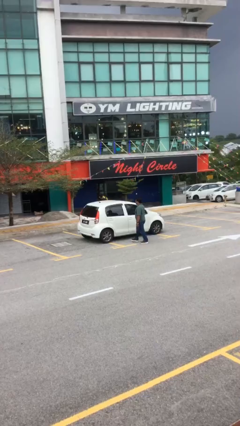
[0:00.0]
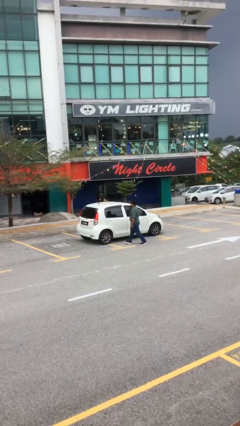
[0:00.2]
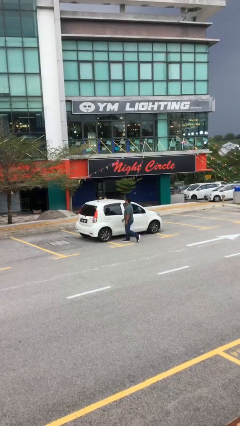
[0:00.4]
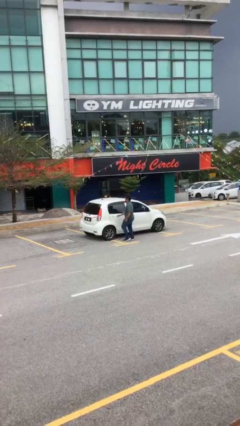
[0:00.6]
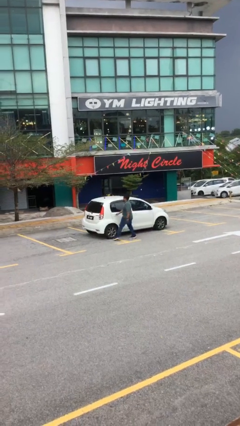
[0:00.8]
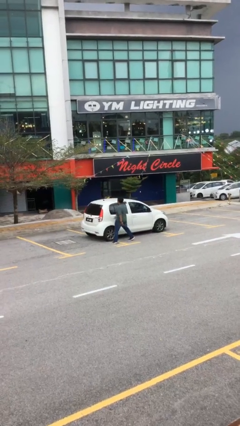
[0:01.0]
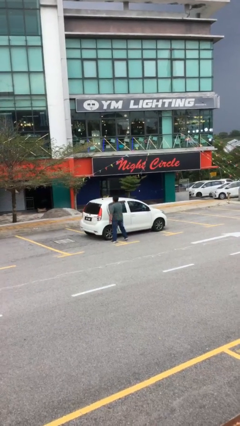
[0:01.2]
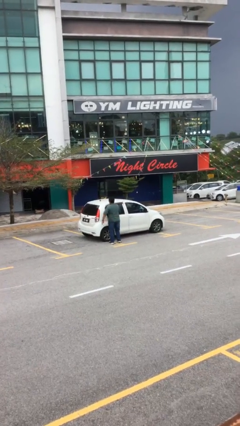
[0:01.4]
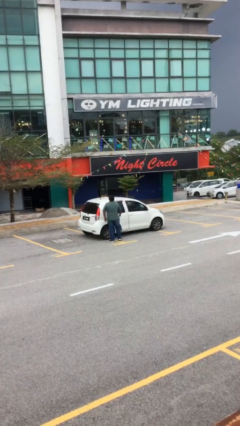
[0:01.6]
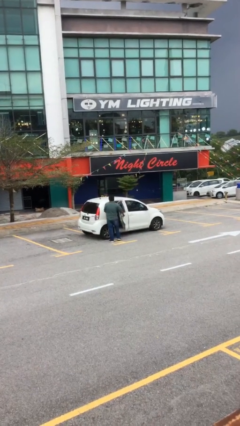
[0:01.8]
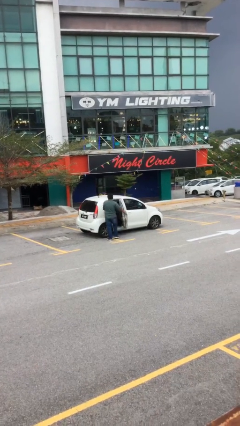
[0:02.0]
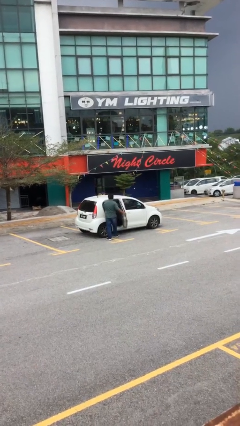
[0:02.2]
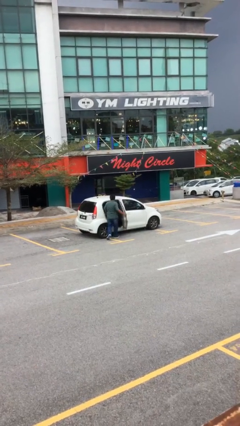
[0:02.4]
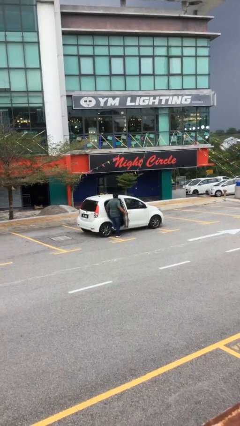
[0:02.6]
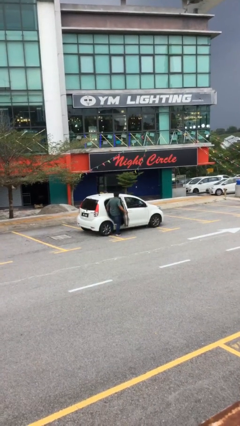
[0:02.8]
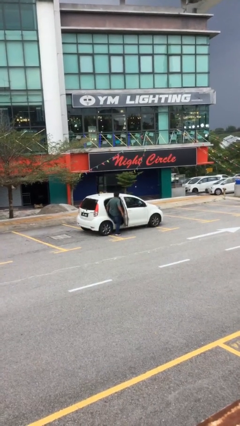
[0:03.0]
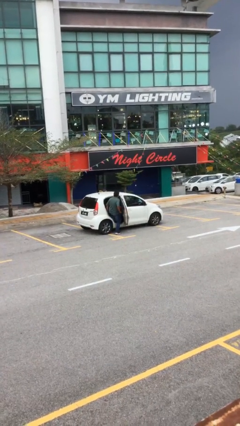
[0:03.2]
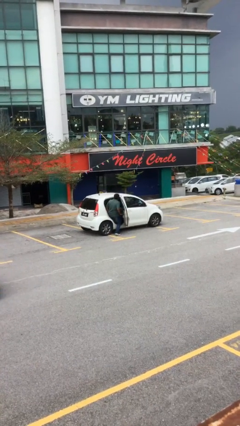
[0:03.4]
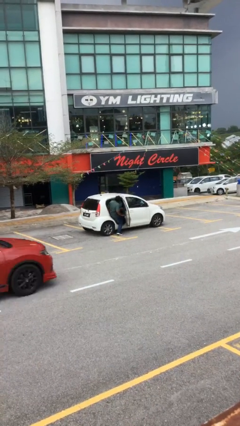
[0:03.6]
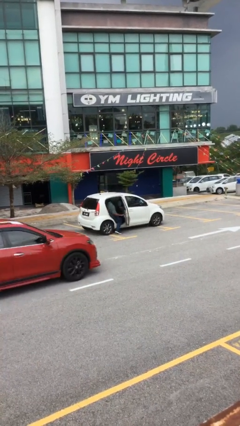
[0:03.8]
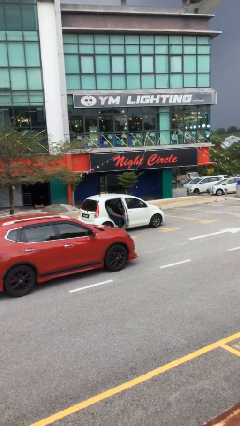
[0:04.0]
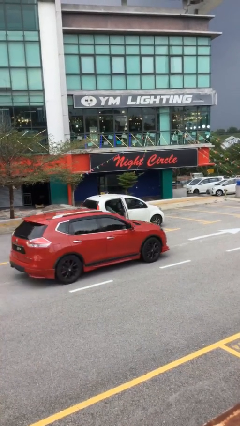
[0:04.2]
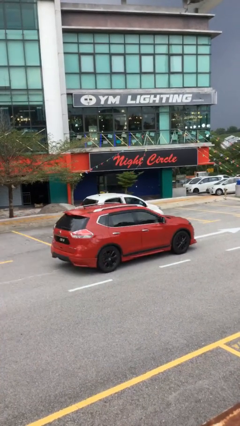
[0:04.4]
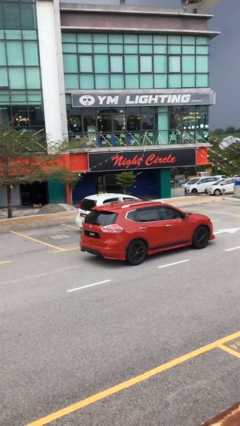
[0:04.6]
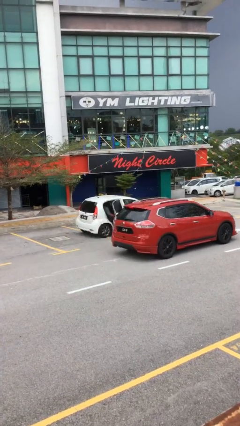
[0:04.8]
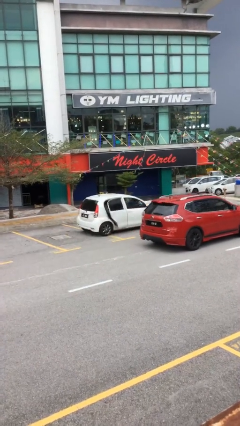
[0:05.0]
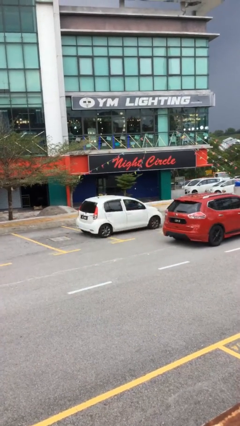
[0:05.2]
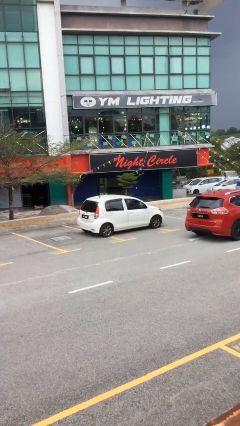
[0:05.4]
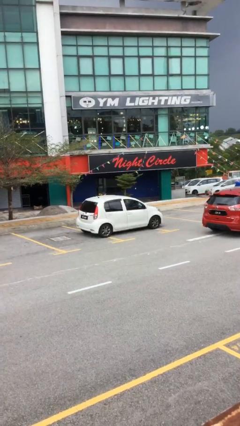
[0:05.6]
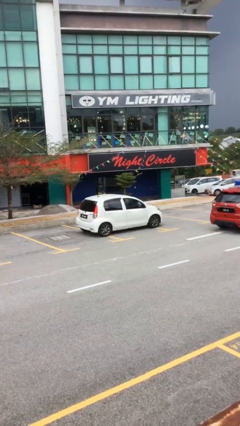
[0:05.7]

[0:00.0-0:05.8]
car picks up person

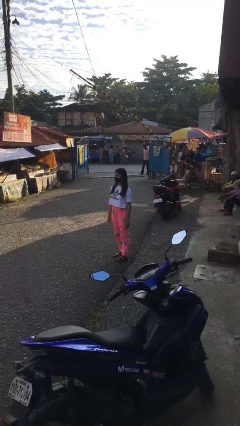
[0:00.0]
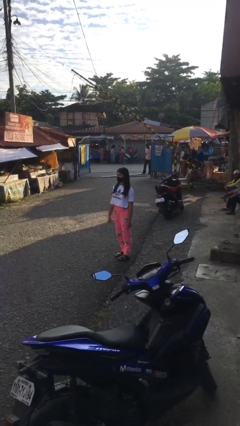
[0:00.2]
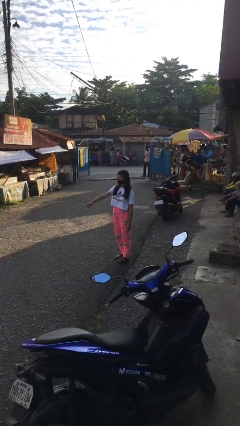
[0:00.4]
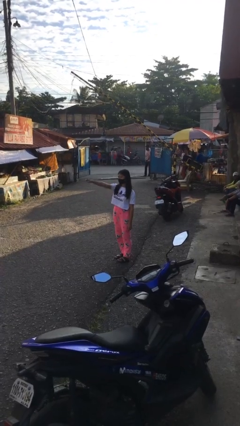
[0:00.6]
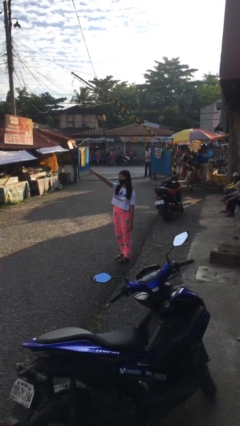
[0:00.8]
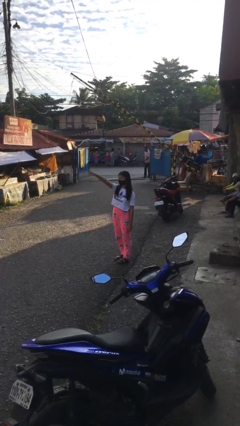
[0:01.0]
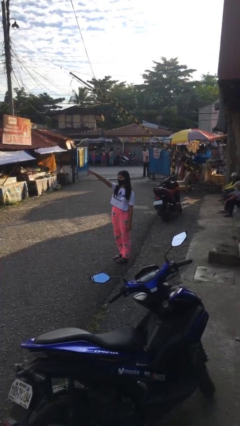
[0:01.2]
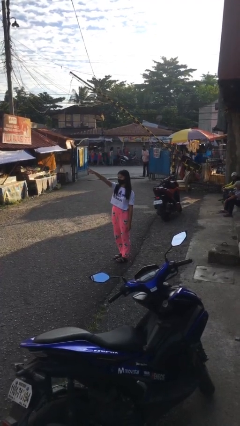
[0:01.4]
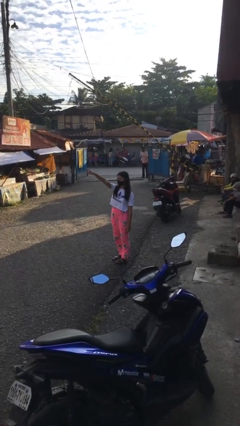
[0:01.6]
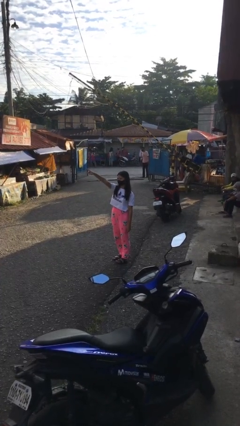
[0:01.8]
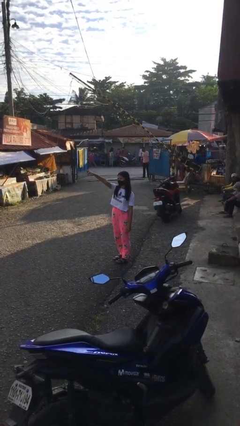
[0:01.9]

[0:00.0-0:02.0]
person points at person

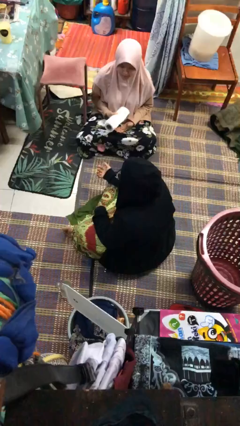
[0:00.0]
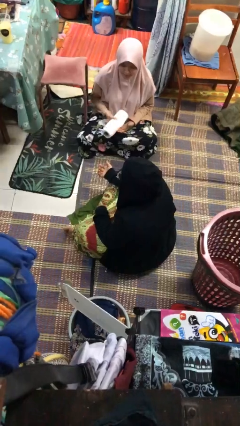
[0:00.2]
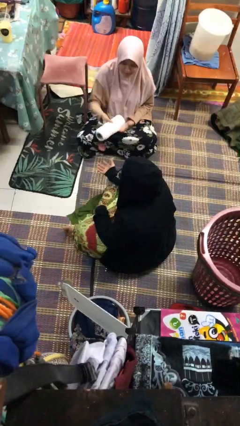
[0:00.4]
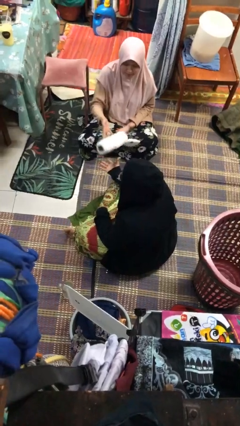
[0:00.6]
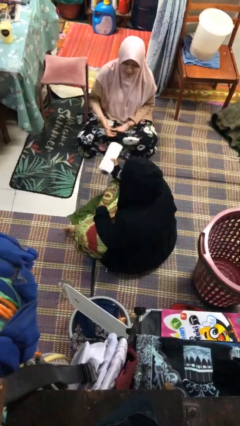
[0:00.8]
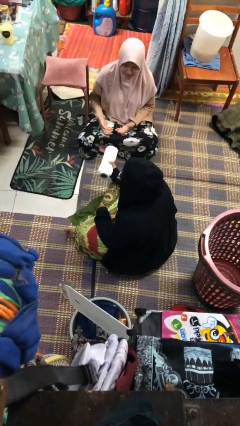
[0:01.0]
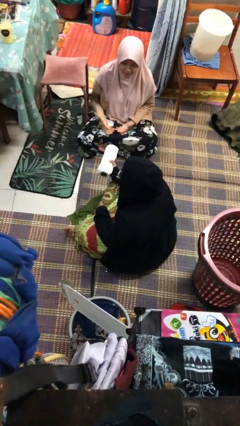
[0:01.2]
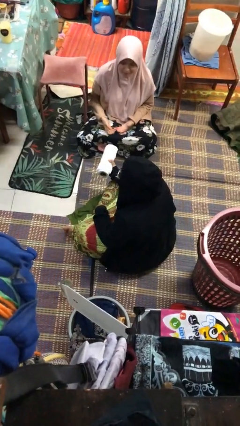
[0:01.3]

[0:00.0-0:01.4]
person catches object from person

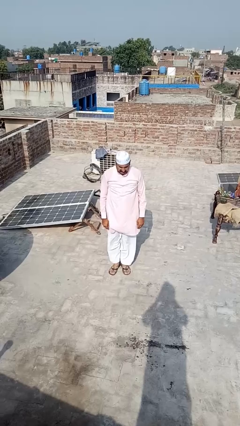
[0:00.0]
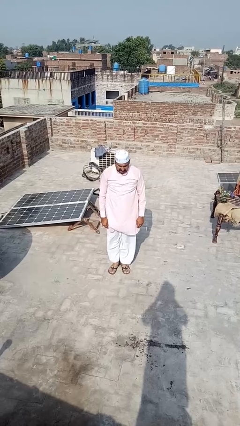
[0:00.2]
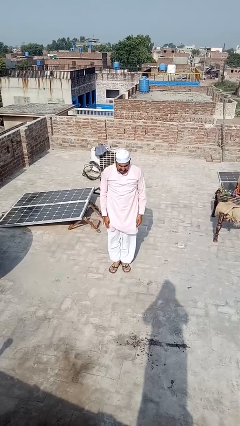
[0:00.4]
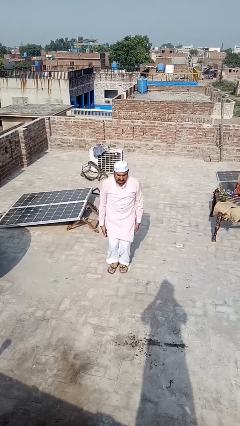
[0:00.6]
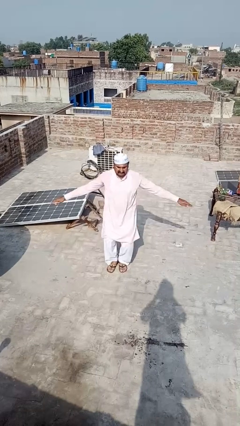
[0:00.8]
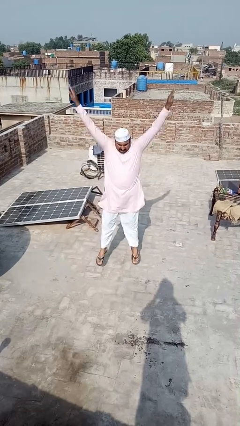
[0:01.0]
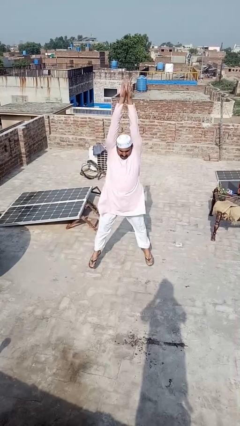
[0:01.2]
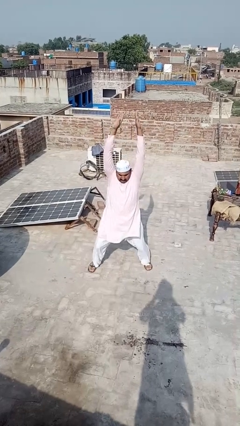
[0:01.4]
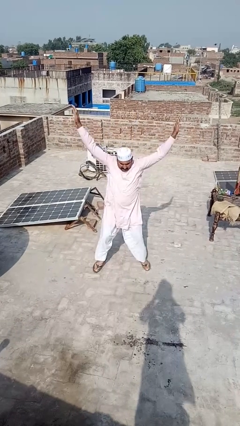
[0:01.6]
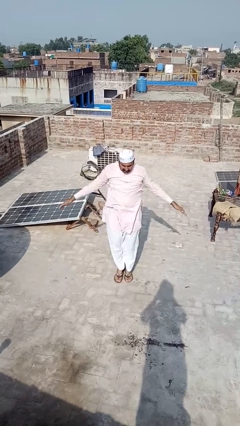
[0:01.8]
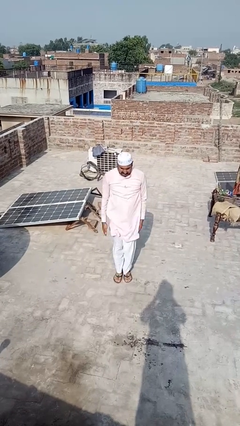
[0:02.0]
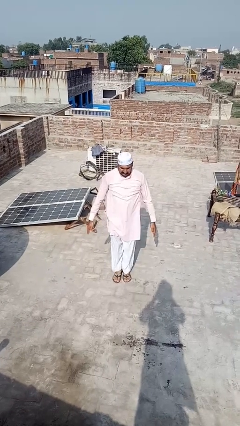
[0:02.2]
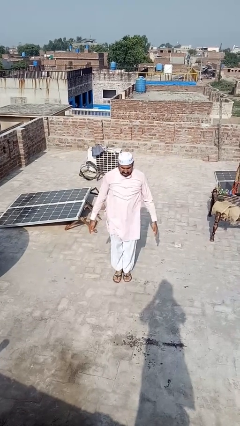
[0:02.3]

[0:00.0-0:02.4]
person exercises with jumping jacks

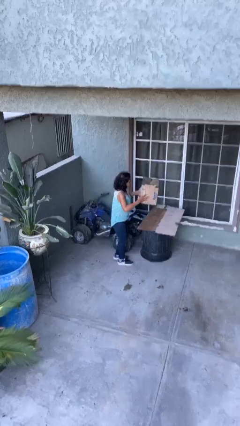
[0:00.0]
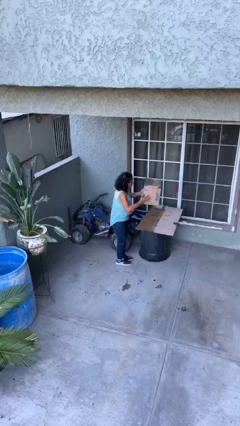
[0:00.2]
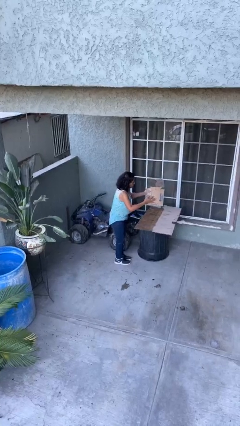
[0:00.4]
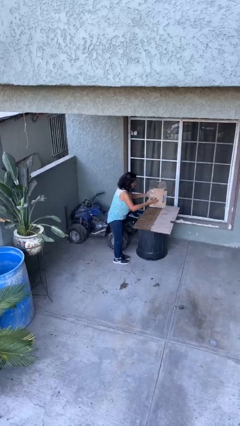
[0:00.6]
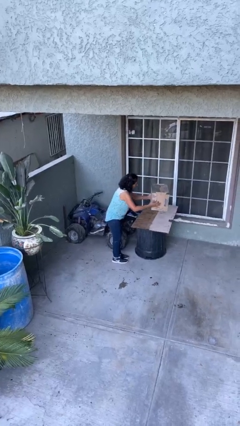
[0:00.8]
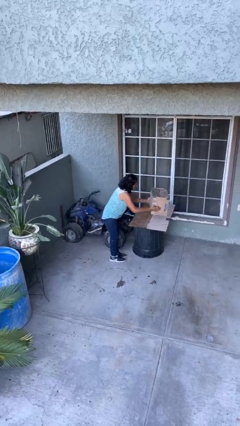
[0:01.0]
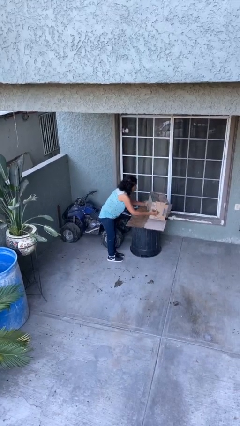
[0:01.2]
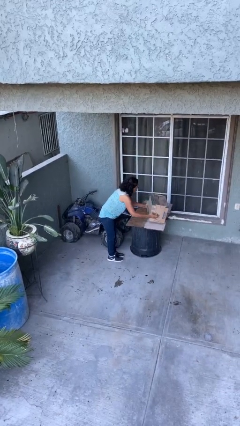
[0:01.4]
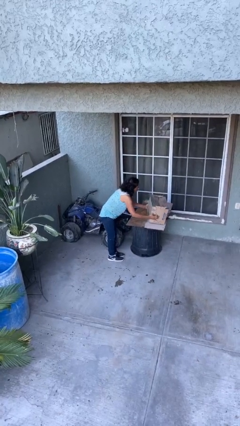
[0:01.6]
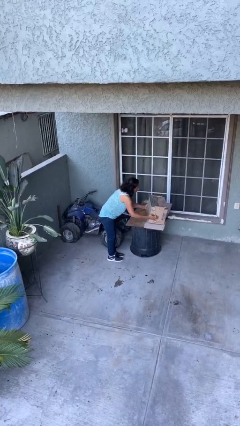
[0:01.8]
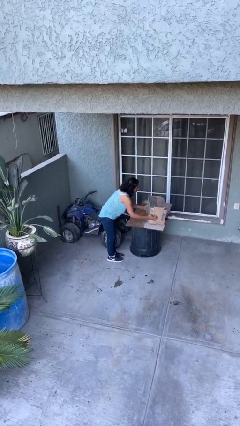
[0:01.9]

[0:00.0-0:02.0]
person puts down object on table

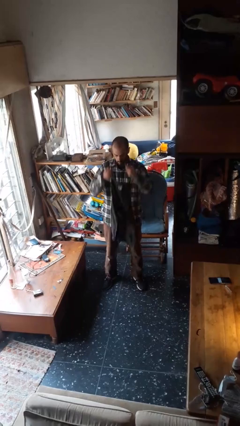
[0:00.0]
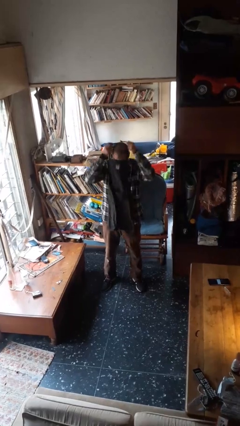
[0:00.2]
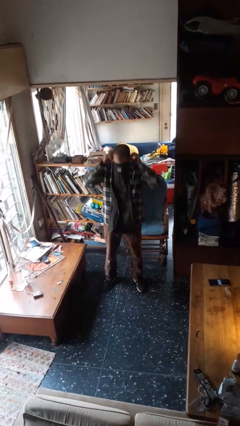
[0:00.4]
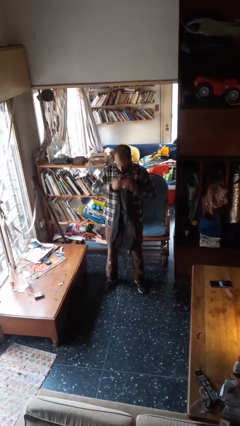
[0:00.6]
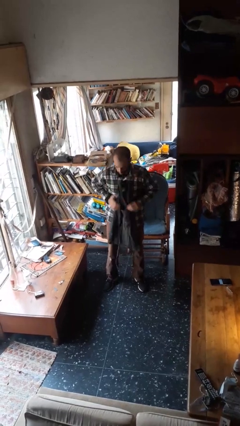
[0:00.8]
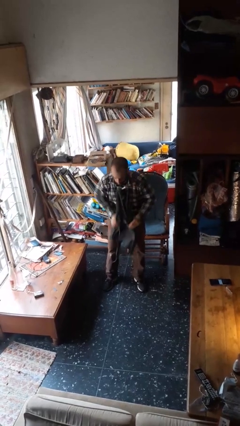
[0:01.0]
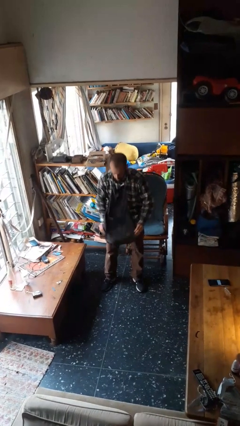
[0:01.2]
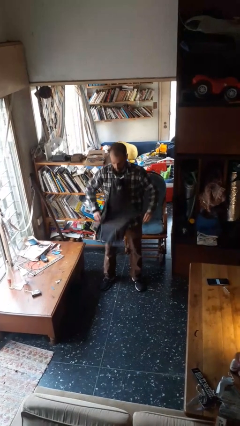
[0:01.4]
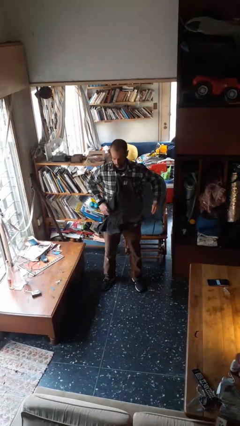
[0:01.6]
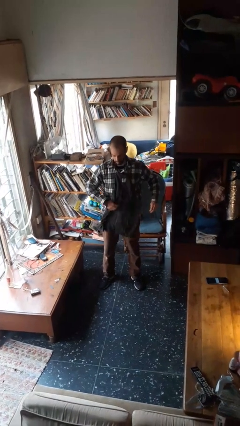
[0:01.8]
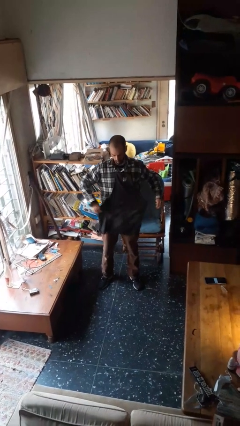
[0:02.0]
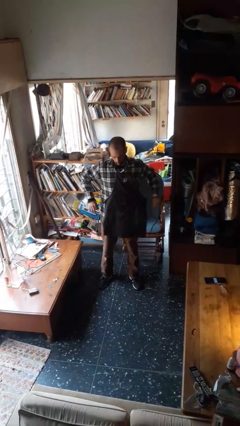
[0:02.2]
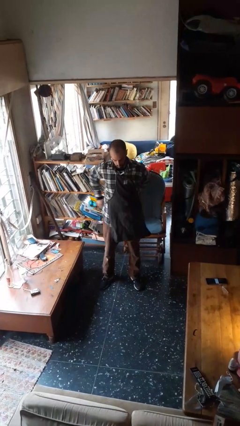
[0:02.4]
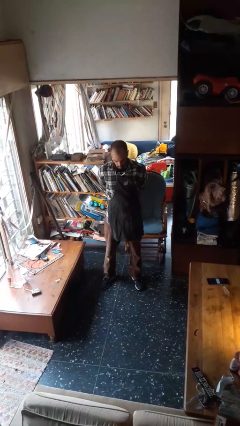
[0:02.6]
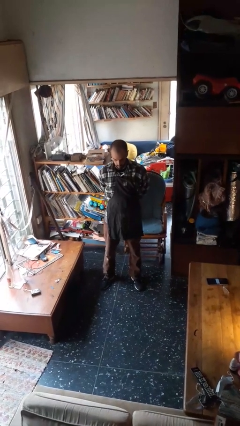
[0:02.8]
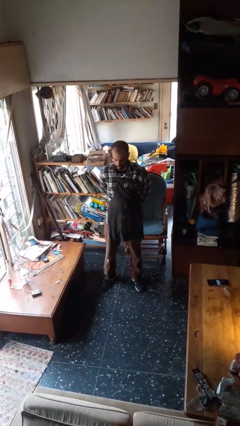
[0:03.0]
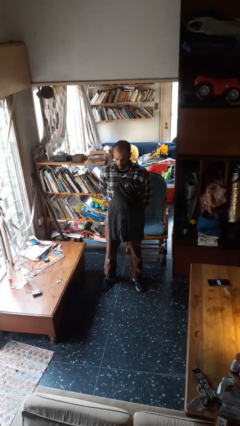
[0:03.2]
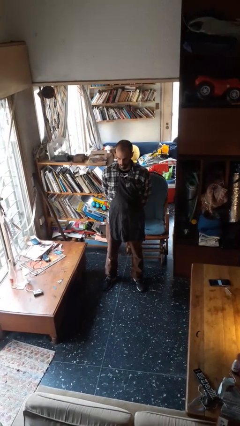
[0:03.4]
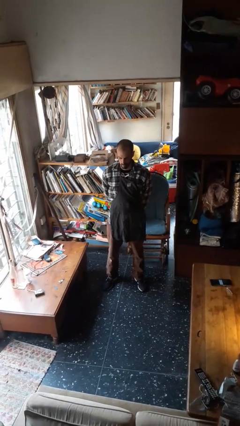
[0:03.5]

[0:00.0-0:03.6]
person puts on apron
